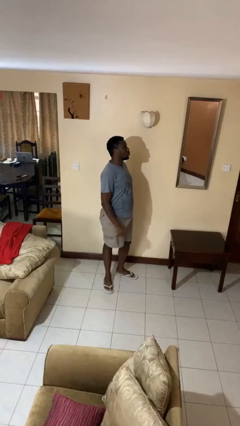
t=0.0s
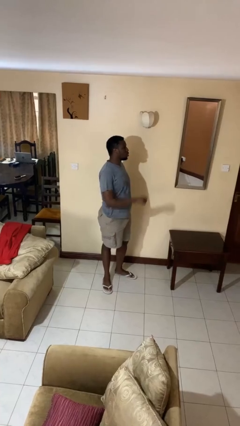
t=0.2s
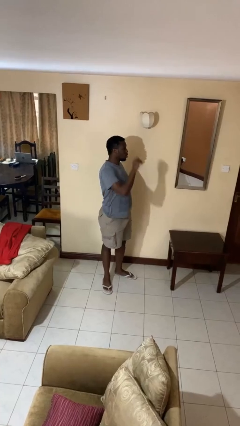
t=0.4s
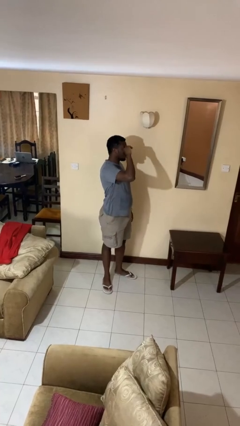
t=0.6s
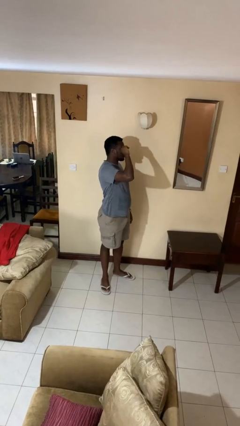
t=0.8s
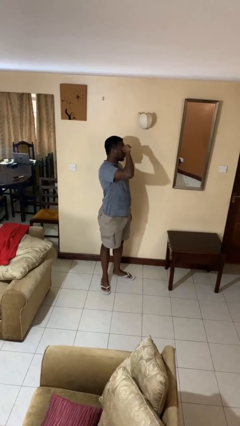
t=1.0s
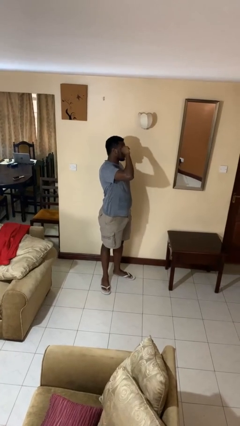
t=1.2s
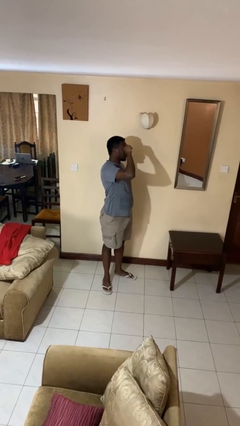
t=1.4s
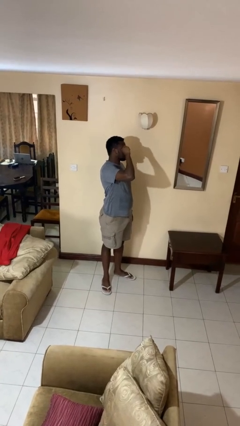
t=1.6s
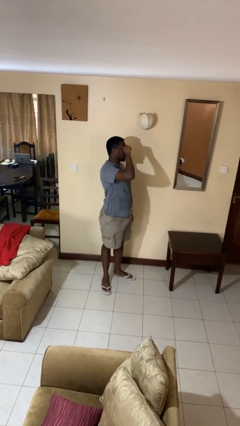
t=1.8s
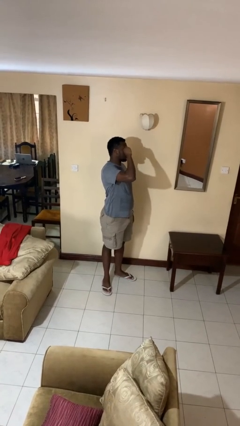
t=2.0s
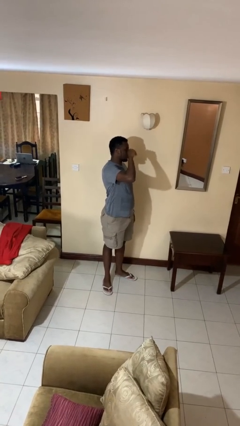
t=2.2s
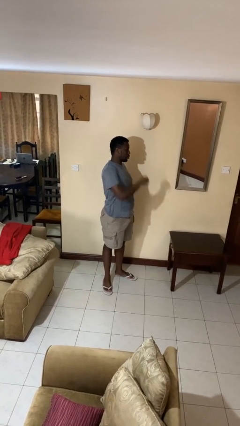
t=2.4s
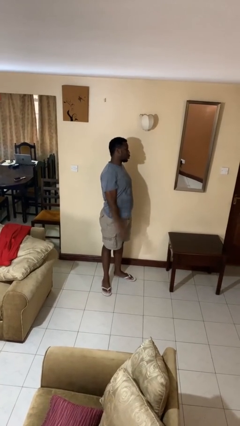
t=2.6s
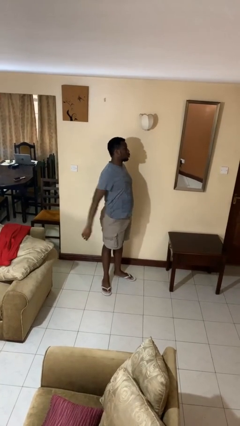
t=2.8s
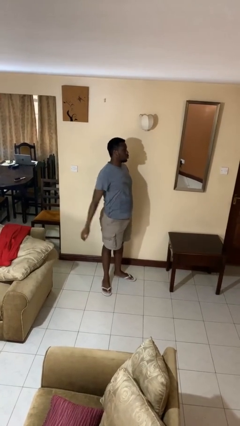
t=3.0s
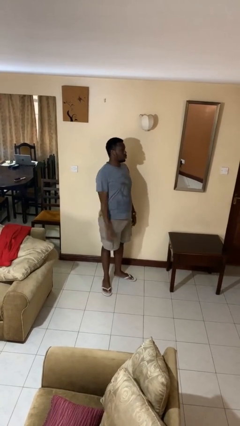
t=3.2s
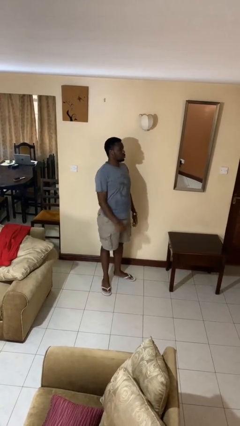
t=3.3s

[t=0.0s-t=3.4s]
person rubs eyes

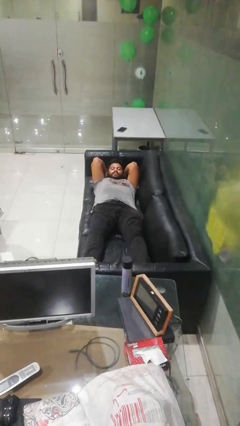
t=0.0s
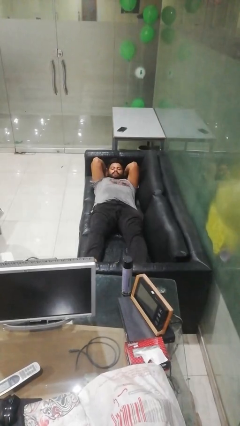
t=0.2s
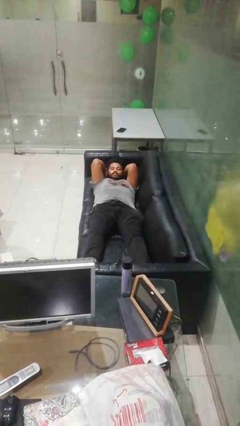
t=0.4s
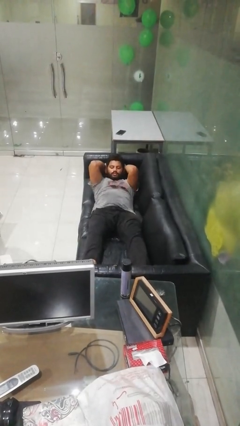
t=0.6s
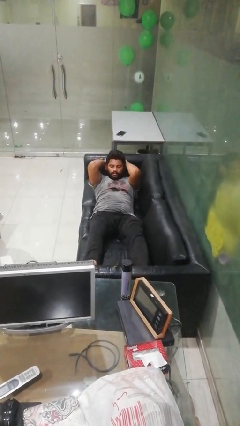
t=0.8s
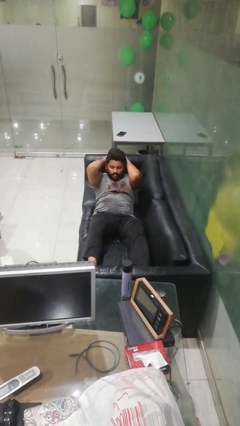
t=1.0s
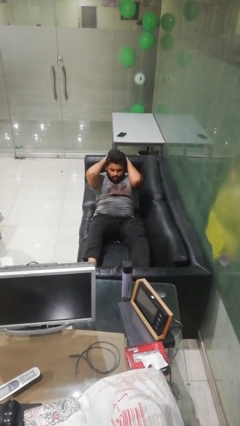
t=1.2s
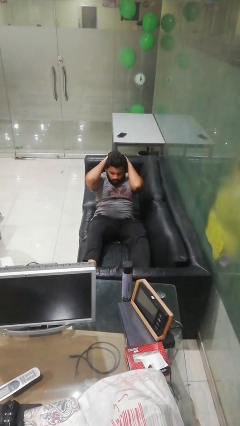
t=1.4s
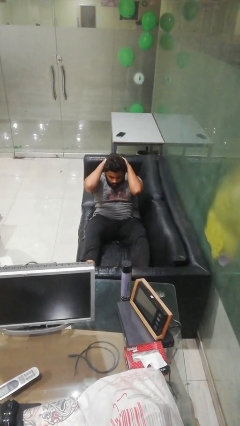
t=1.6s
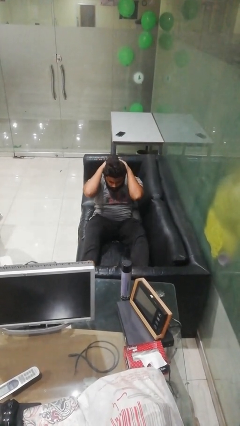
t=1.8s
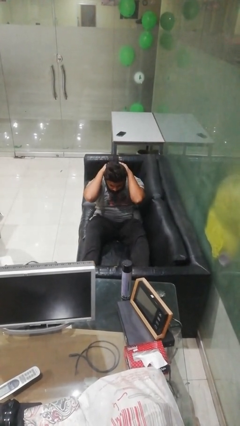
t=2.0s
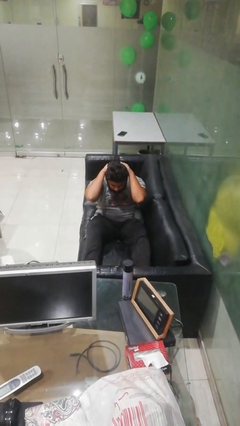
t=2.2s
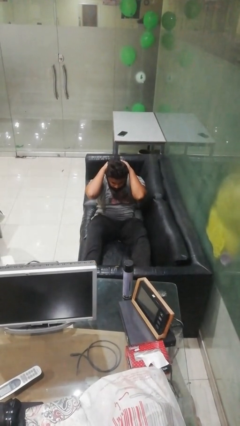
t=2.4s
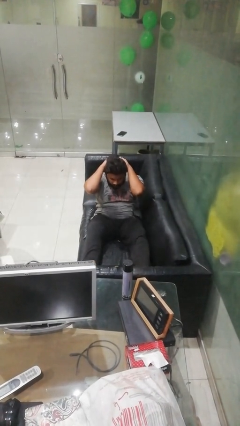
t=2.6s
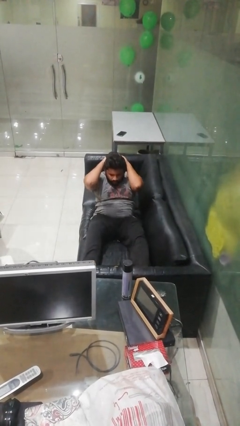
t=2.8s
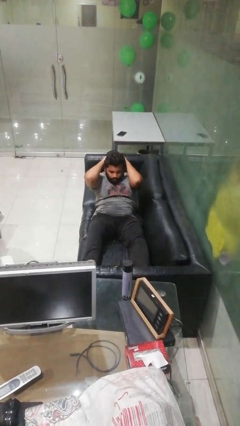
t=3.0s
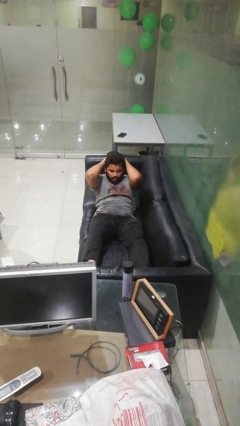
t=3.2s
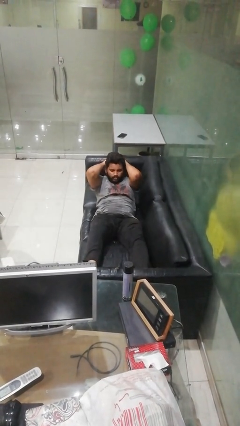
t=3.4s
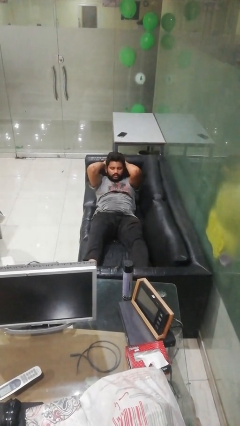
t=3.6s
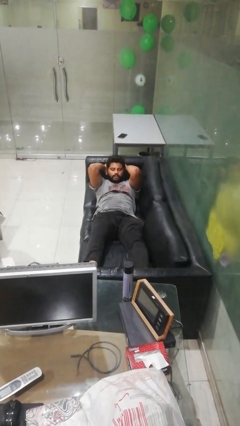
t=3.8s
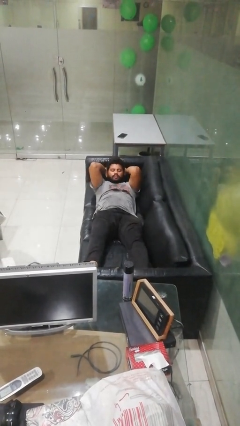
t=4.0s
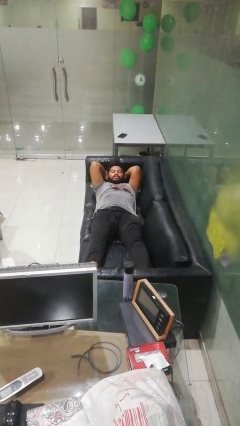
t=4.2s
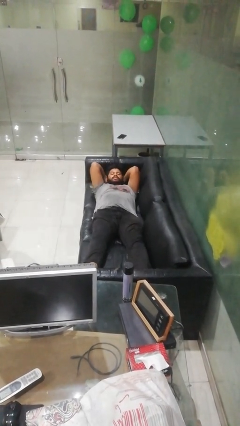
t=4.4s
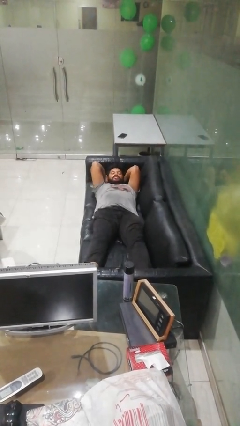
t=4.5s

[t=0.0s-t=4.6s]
person exercises with situp

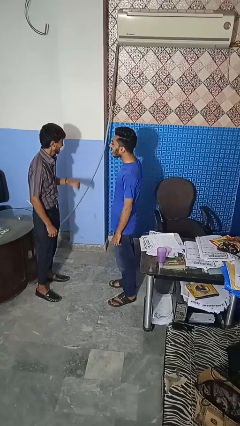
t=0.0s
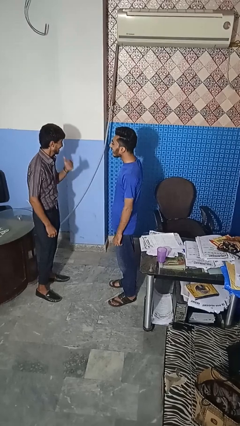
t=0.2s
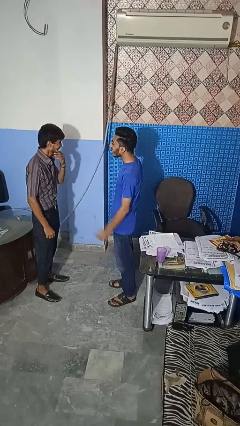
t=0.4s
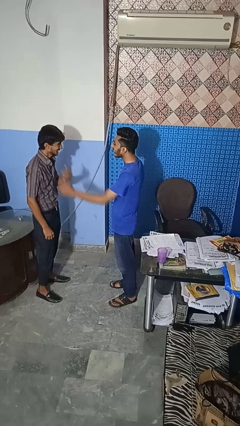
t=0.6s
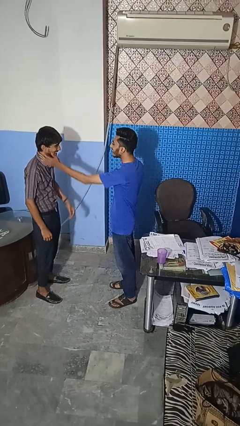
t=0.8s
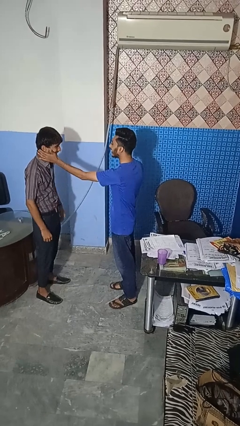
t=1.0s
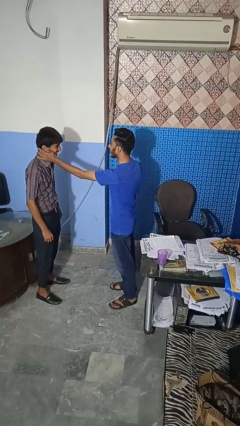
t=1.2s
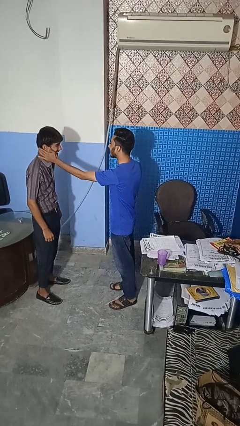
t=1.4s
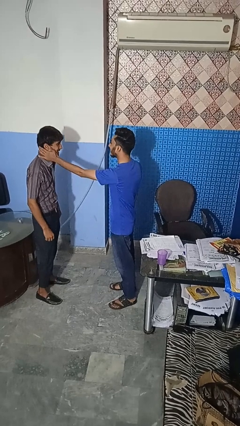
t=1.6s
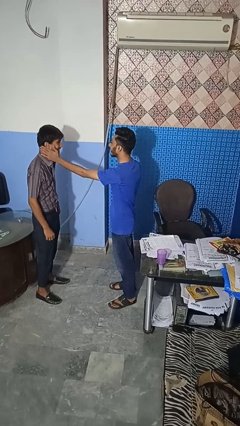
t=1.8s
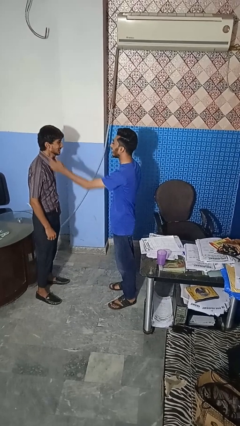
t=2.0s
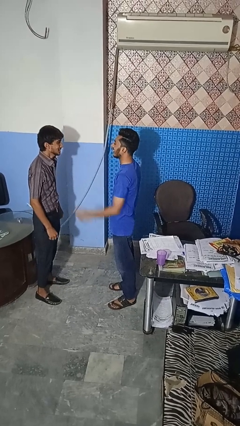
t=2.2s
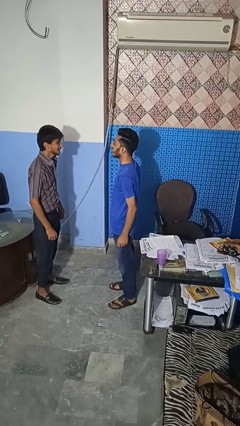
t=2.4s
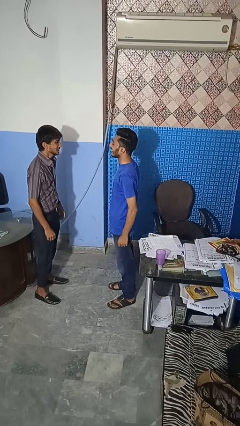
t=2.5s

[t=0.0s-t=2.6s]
person touches face of person

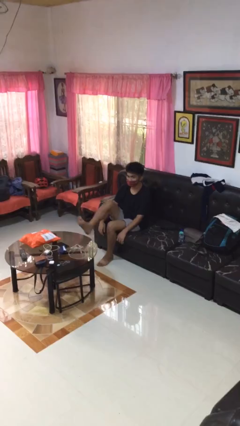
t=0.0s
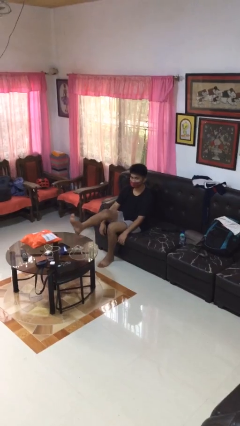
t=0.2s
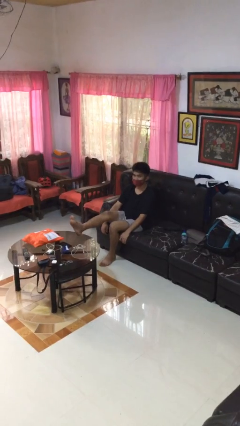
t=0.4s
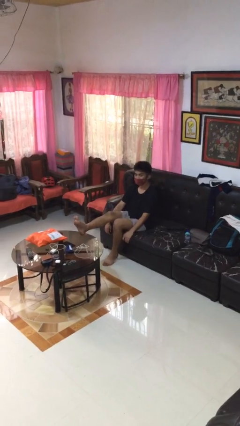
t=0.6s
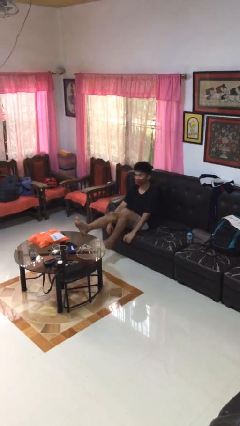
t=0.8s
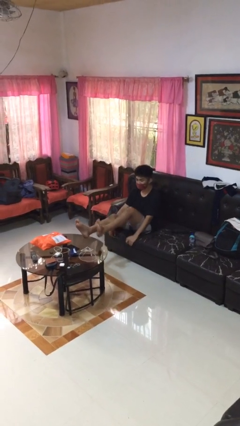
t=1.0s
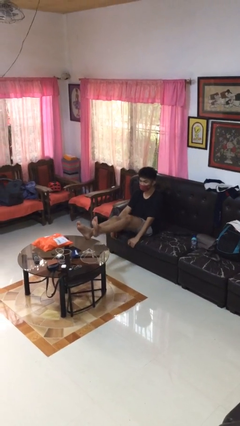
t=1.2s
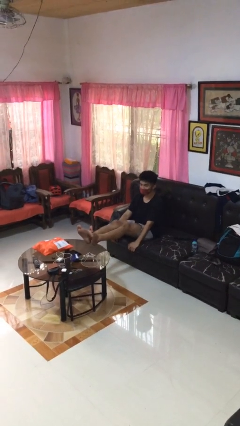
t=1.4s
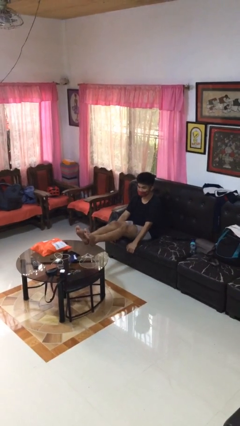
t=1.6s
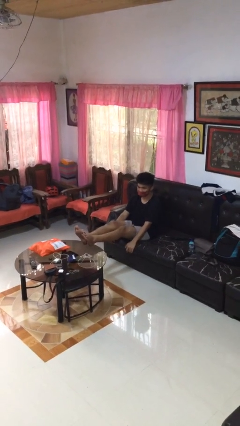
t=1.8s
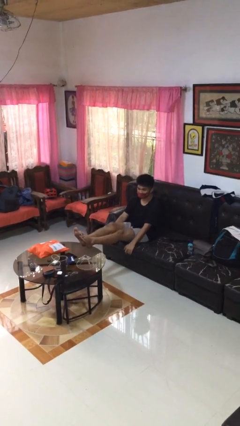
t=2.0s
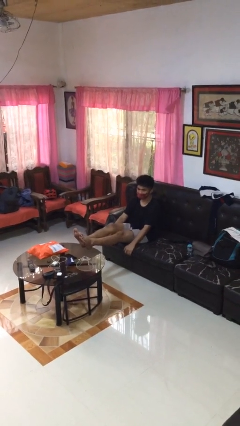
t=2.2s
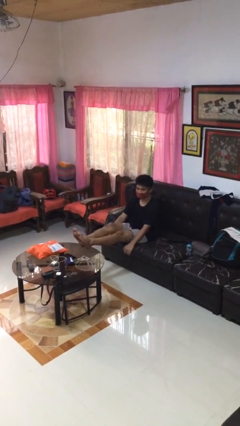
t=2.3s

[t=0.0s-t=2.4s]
person puts feet up

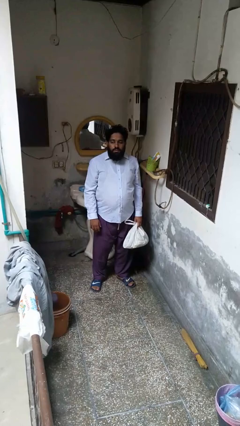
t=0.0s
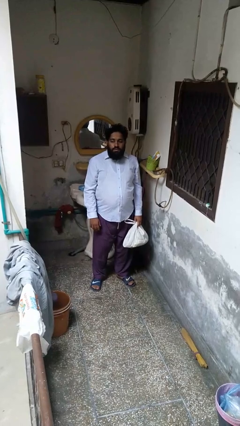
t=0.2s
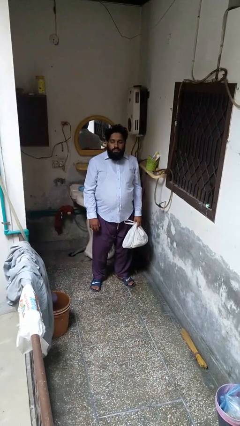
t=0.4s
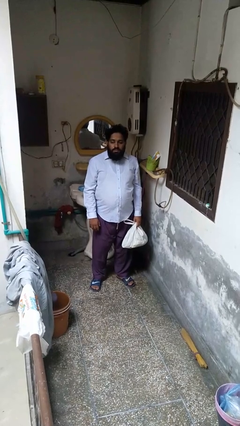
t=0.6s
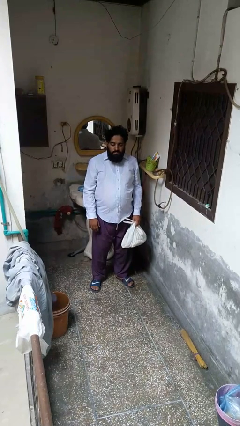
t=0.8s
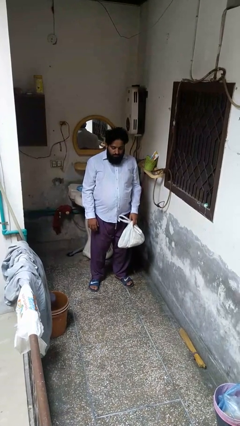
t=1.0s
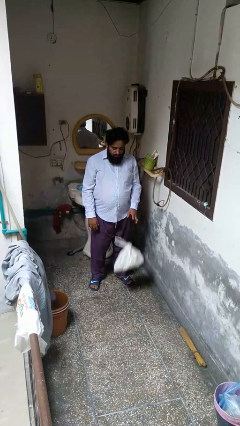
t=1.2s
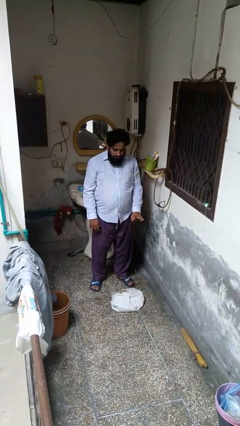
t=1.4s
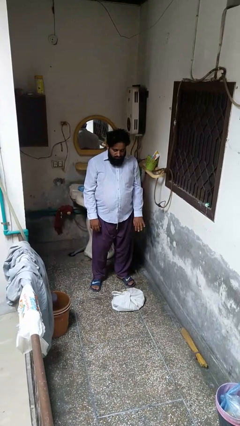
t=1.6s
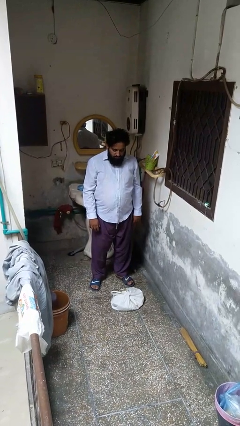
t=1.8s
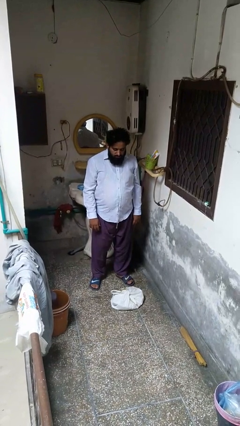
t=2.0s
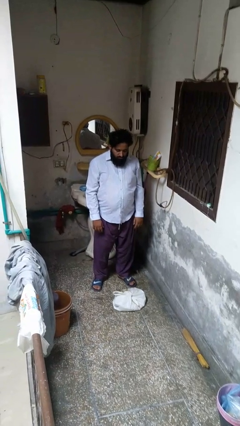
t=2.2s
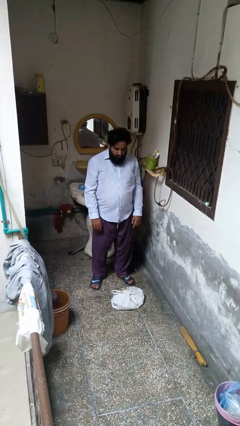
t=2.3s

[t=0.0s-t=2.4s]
person throws object to ground

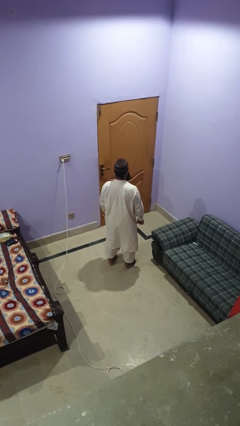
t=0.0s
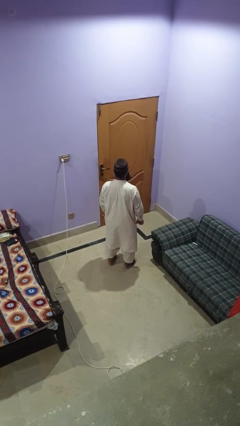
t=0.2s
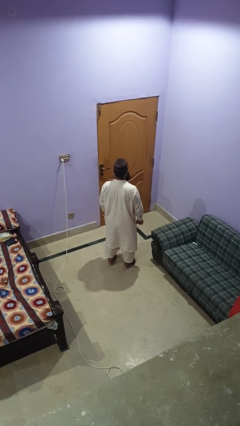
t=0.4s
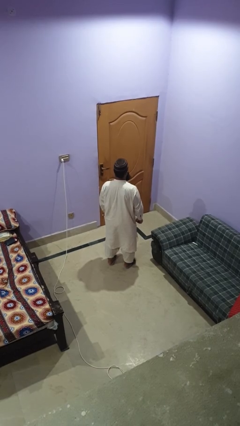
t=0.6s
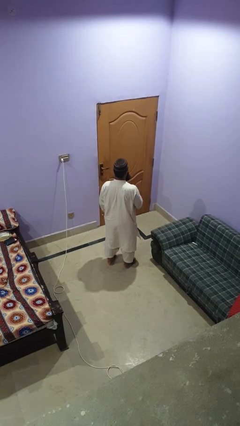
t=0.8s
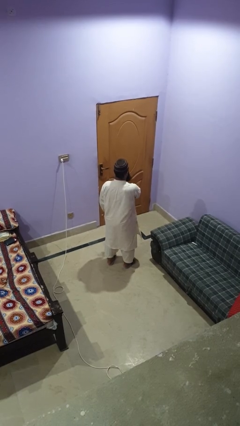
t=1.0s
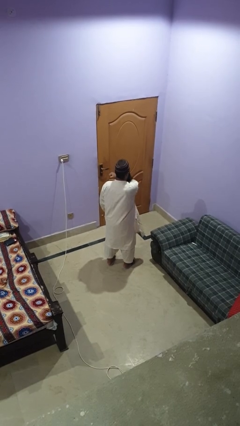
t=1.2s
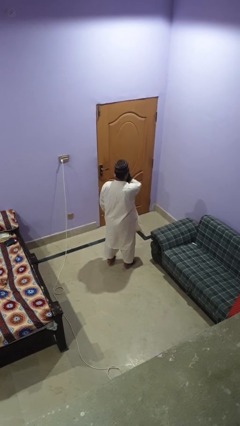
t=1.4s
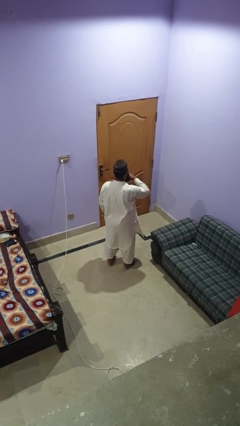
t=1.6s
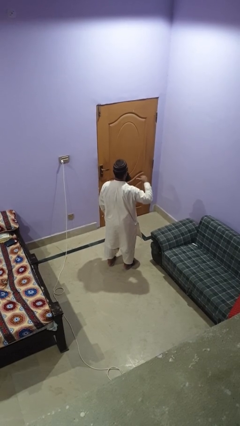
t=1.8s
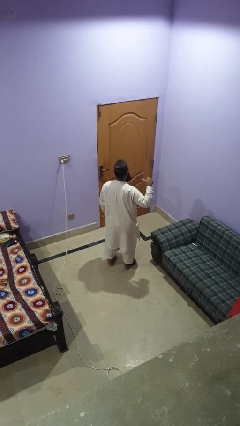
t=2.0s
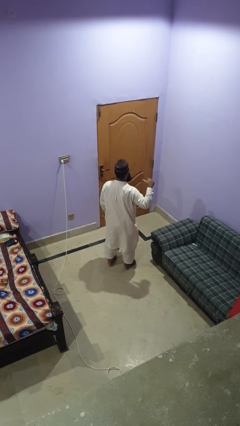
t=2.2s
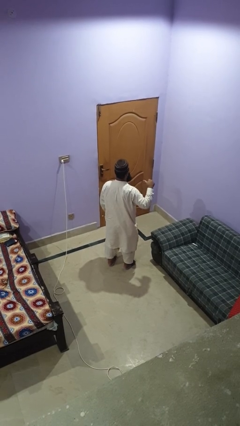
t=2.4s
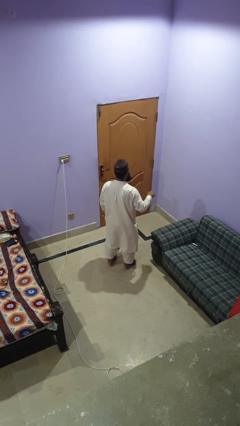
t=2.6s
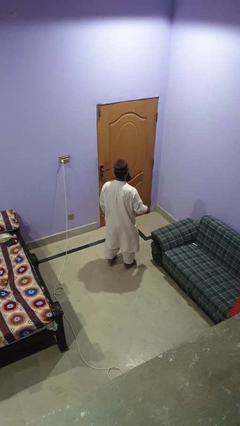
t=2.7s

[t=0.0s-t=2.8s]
person gestures cut
